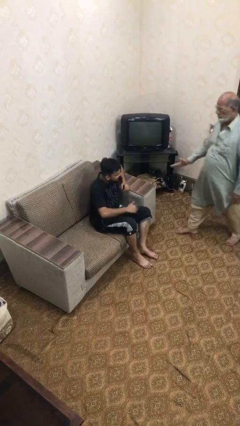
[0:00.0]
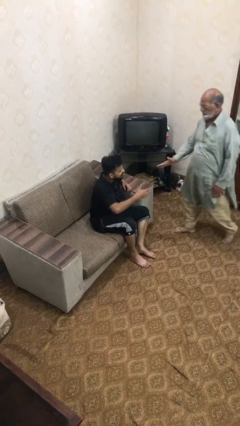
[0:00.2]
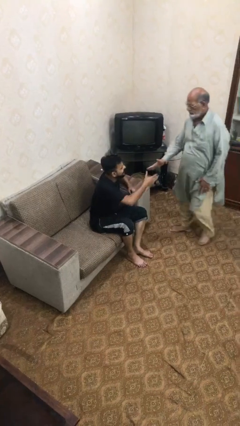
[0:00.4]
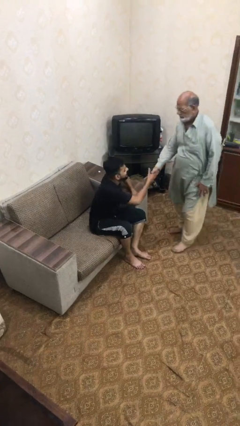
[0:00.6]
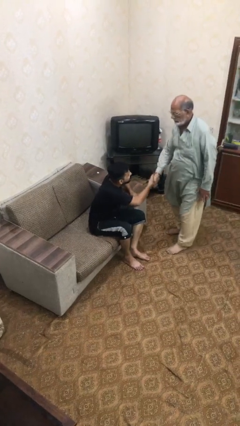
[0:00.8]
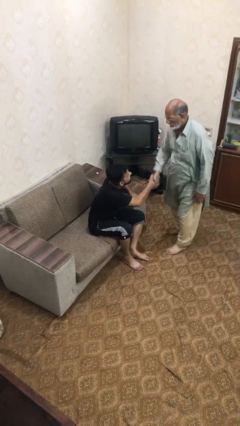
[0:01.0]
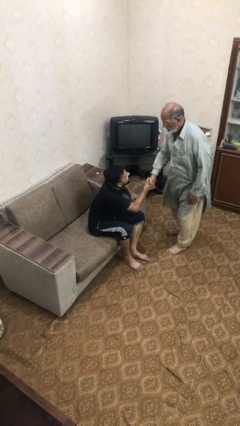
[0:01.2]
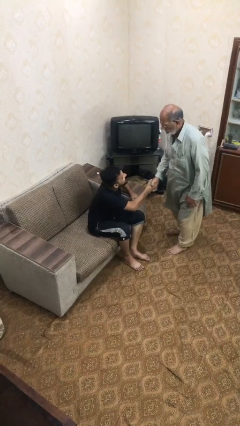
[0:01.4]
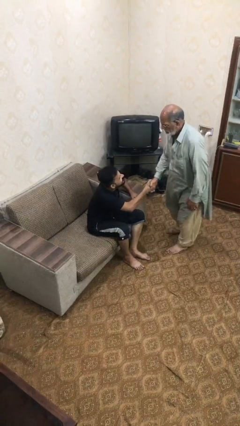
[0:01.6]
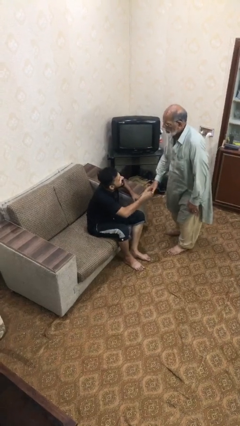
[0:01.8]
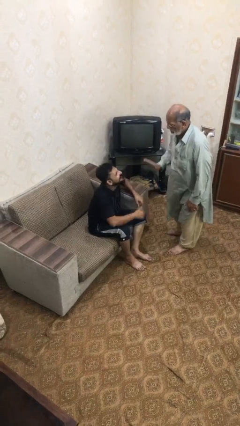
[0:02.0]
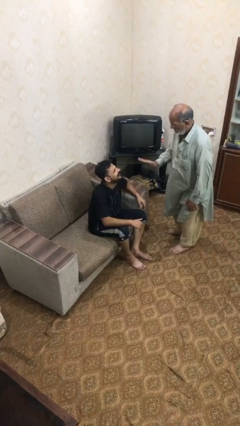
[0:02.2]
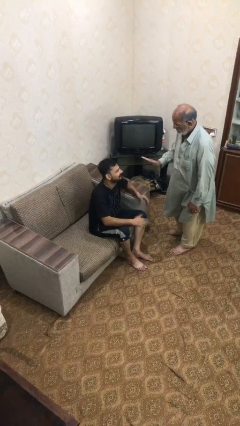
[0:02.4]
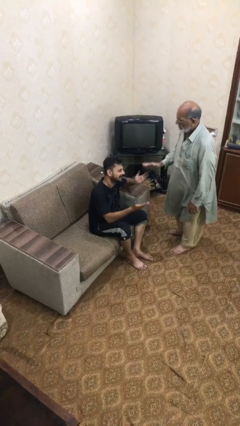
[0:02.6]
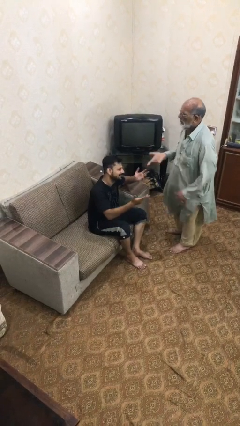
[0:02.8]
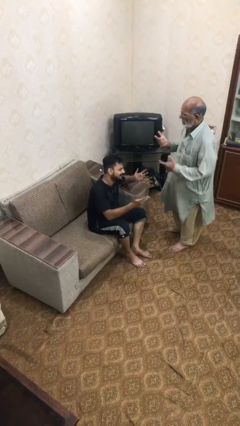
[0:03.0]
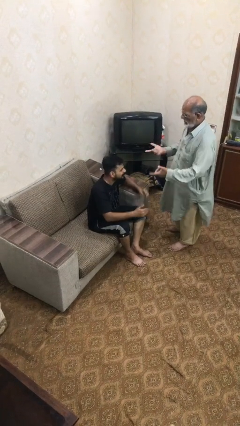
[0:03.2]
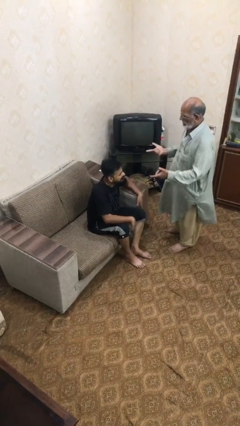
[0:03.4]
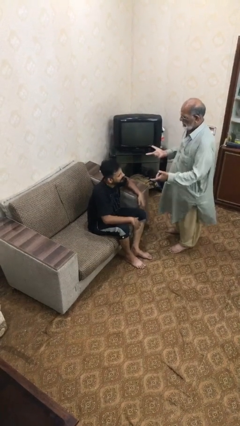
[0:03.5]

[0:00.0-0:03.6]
person shakes hand

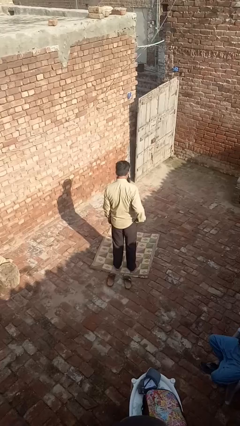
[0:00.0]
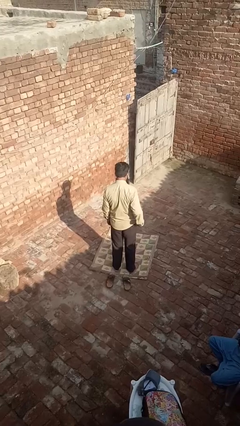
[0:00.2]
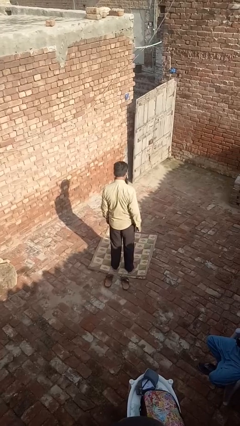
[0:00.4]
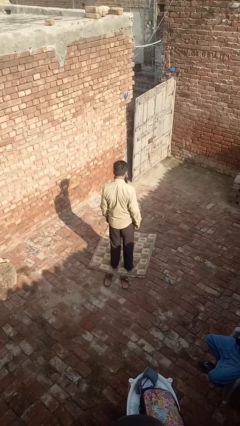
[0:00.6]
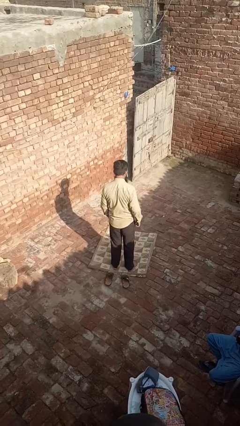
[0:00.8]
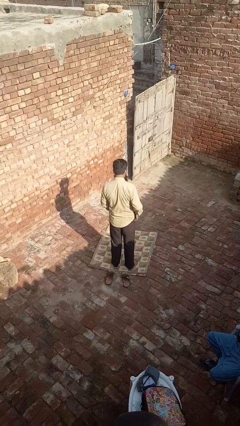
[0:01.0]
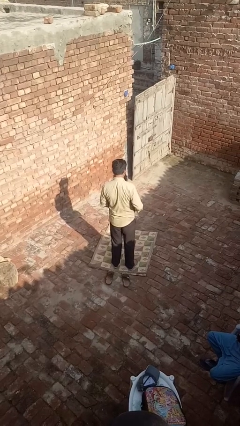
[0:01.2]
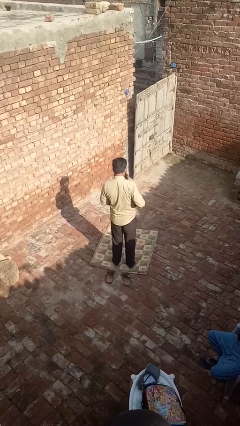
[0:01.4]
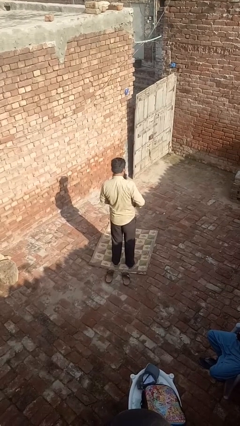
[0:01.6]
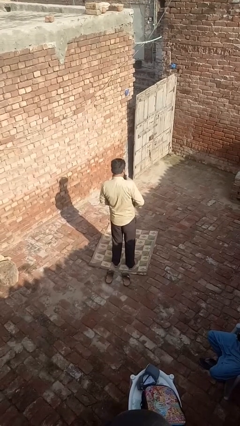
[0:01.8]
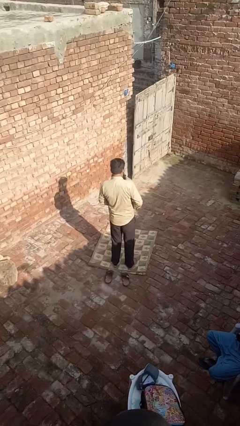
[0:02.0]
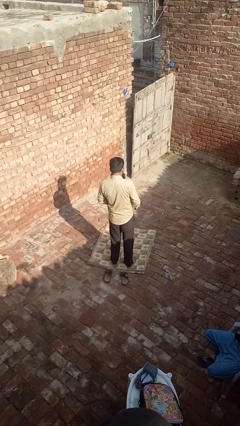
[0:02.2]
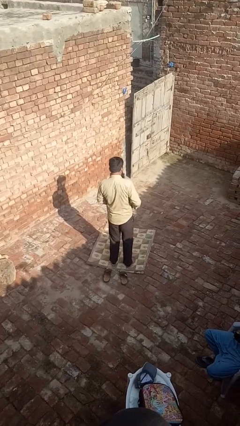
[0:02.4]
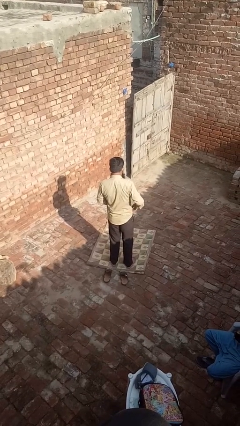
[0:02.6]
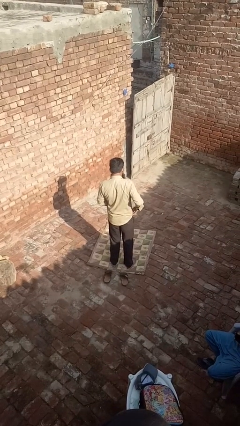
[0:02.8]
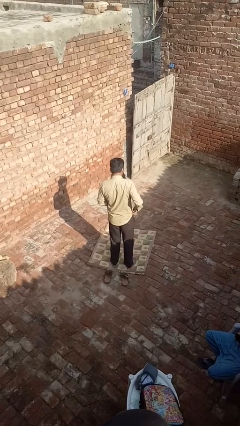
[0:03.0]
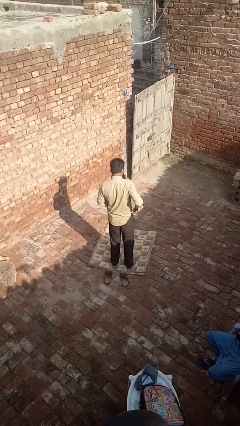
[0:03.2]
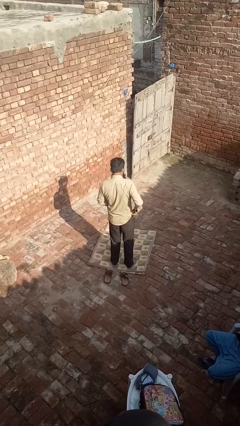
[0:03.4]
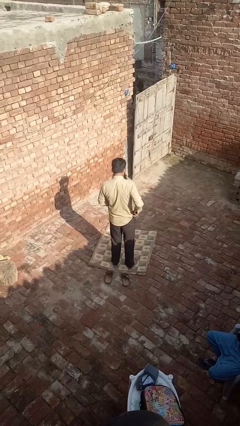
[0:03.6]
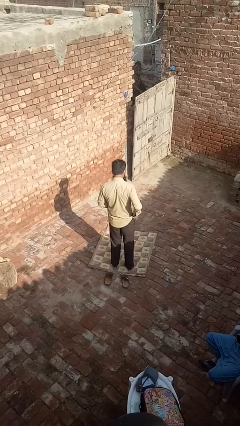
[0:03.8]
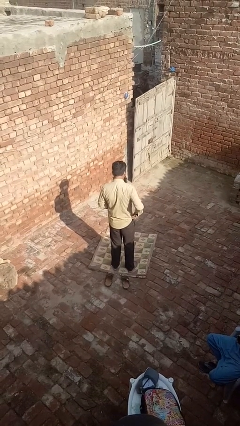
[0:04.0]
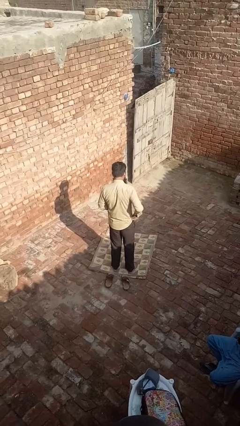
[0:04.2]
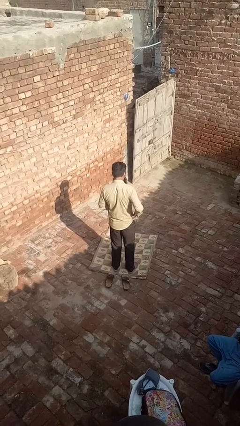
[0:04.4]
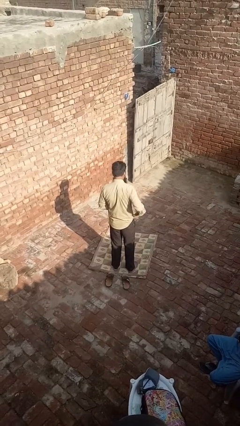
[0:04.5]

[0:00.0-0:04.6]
person tucks in shirt

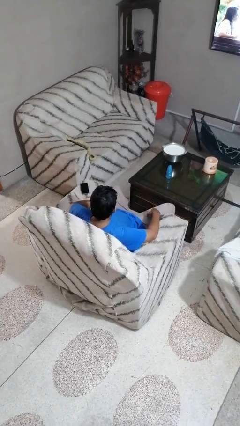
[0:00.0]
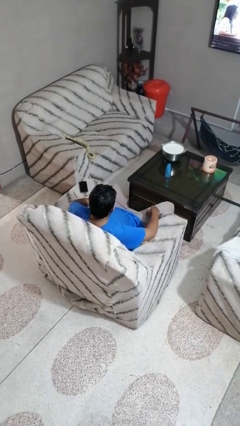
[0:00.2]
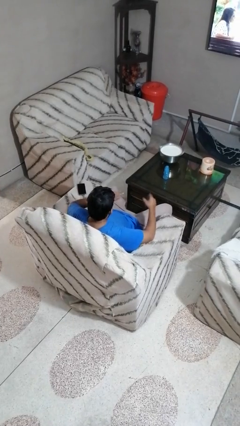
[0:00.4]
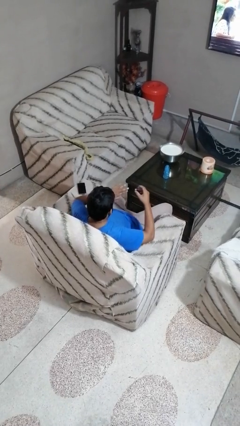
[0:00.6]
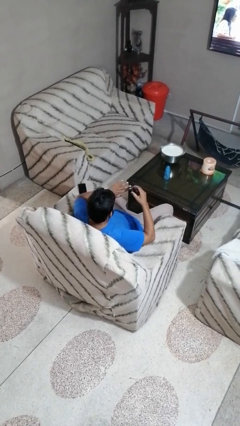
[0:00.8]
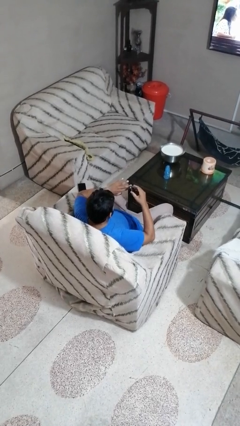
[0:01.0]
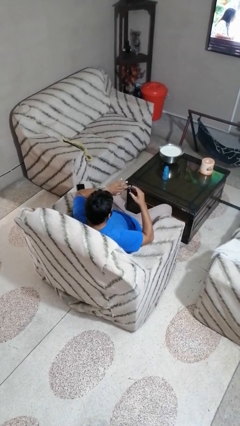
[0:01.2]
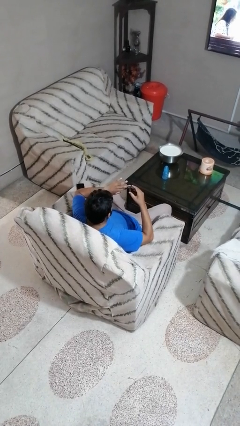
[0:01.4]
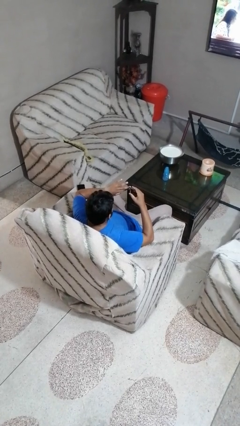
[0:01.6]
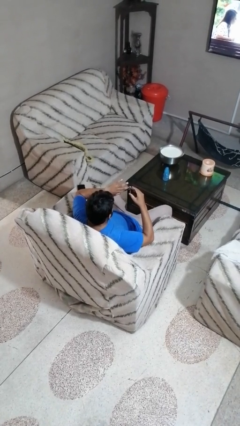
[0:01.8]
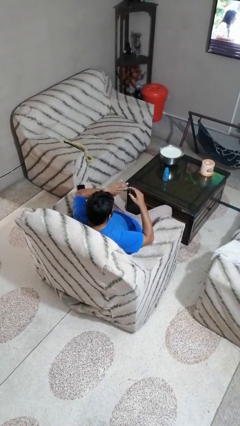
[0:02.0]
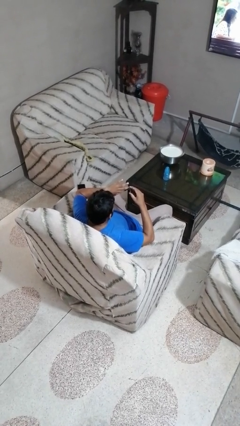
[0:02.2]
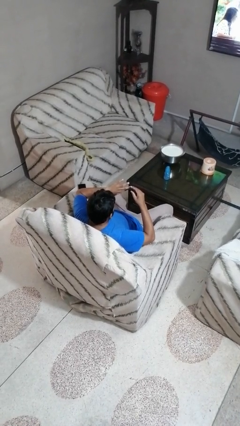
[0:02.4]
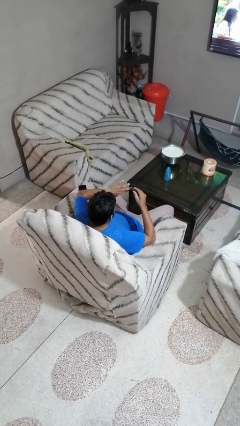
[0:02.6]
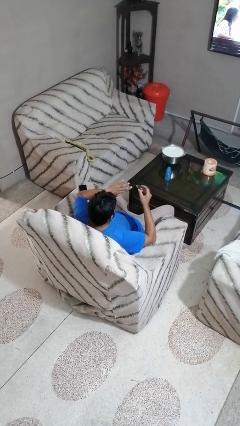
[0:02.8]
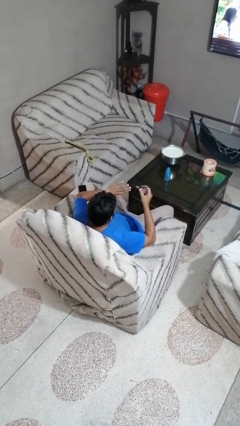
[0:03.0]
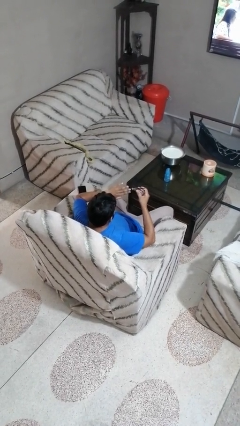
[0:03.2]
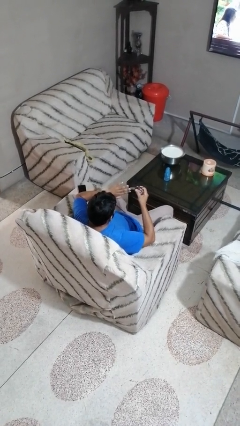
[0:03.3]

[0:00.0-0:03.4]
person clips fingernails

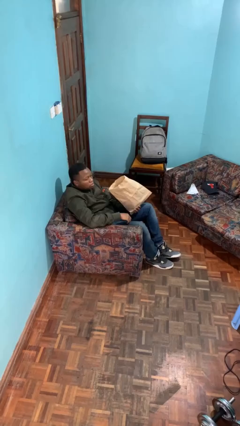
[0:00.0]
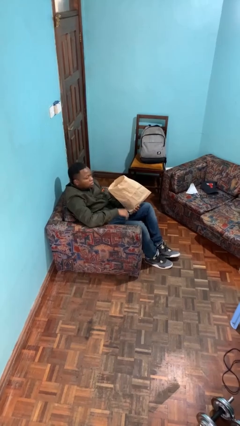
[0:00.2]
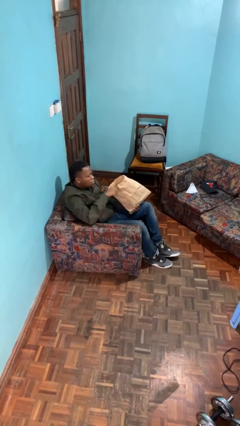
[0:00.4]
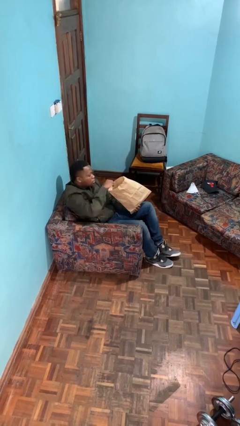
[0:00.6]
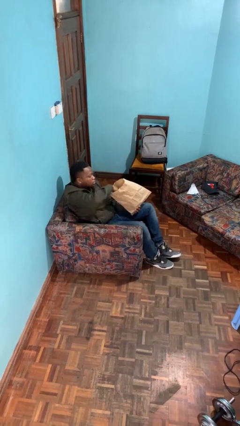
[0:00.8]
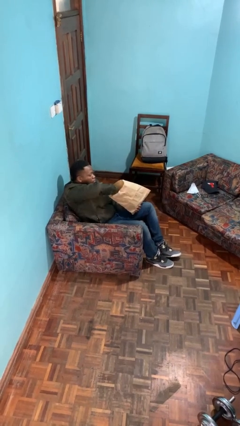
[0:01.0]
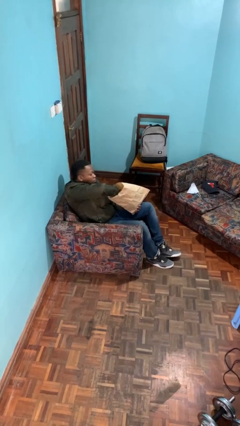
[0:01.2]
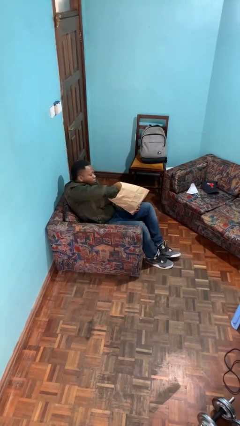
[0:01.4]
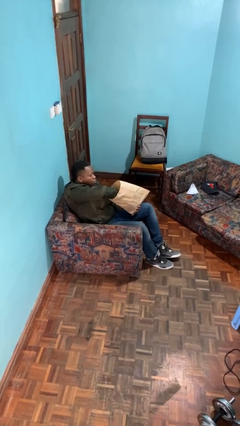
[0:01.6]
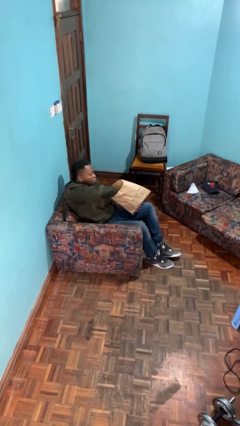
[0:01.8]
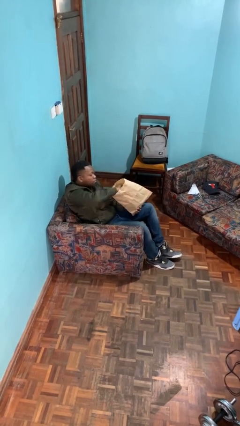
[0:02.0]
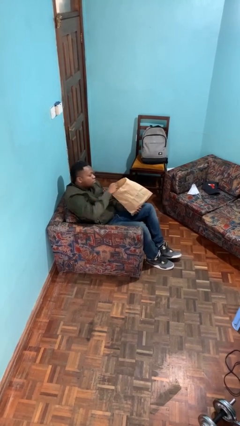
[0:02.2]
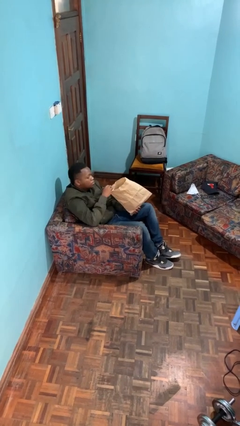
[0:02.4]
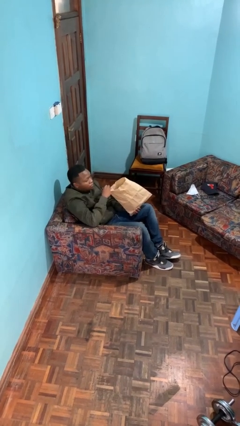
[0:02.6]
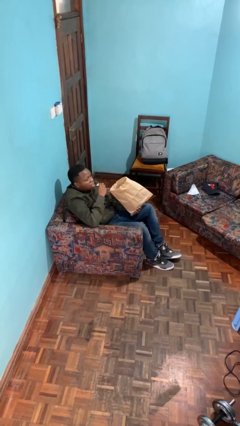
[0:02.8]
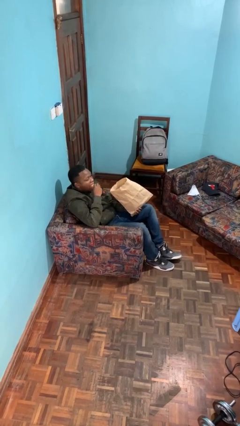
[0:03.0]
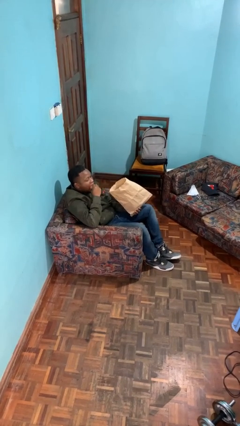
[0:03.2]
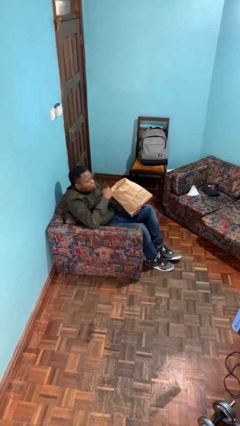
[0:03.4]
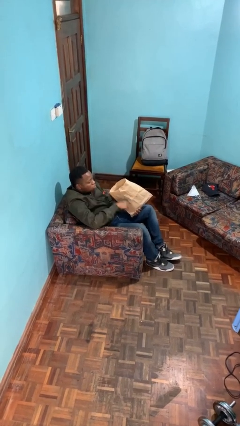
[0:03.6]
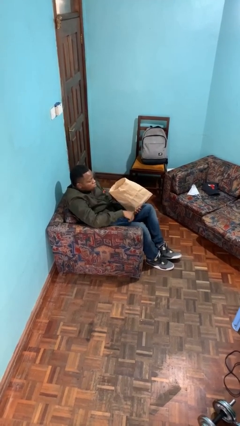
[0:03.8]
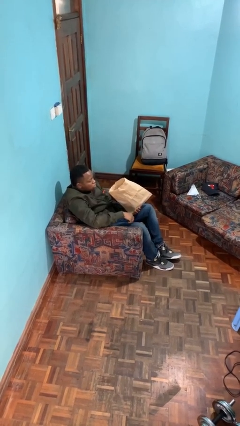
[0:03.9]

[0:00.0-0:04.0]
person eats snack from bag

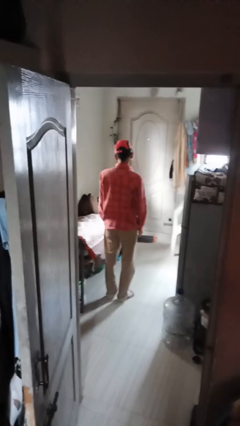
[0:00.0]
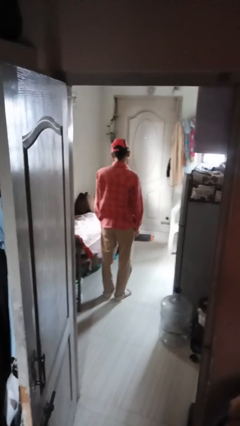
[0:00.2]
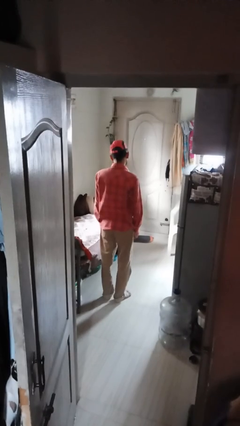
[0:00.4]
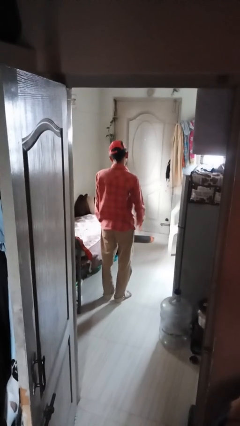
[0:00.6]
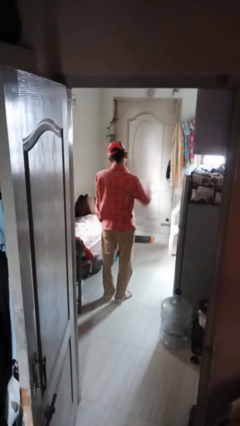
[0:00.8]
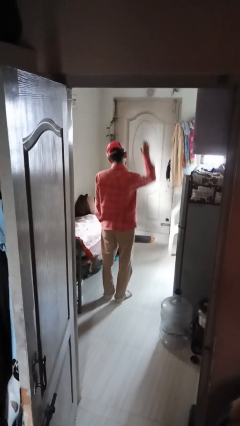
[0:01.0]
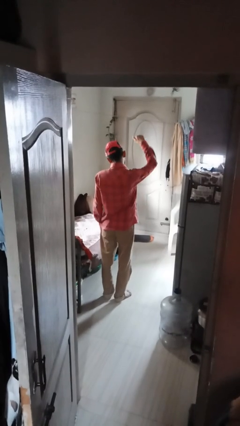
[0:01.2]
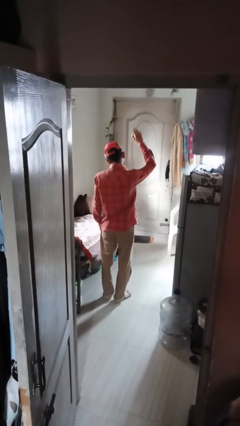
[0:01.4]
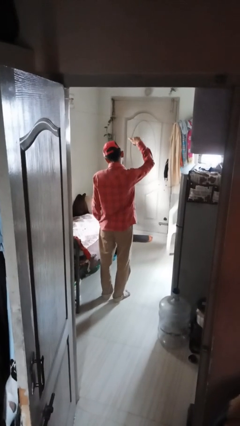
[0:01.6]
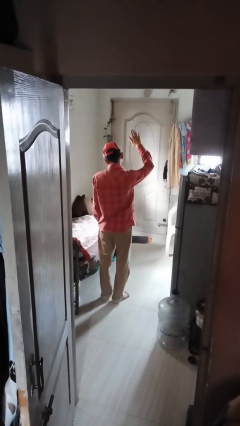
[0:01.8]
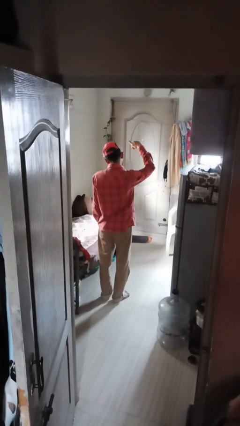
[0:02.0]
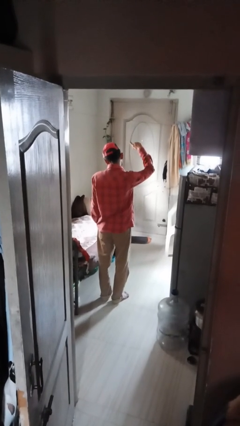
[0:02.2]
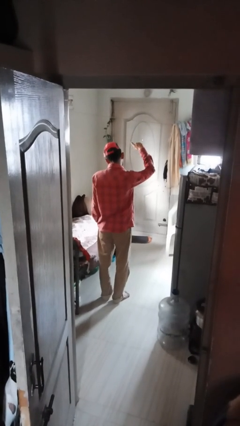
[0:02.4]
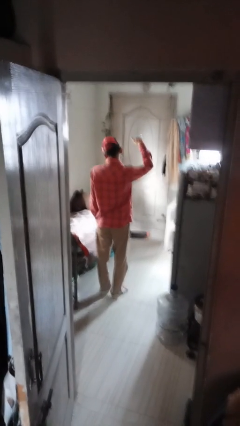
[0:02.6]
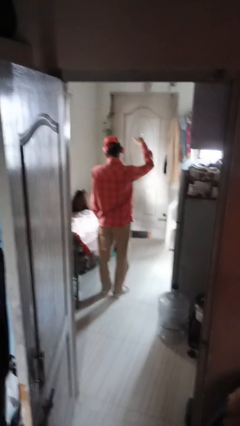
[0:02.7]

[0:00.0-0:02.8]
person gestures come here
